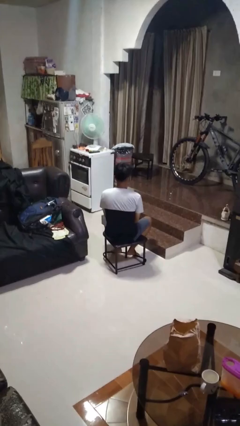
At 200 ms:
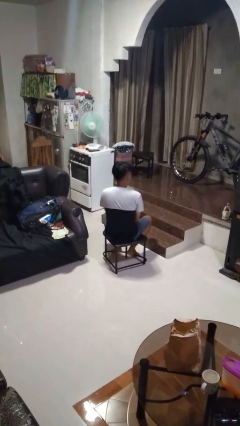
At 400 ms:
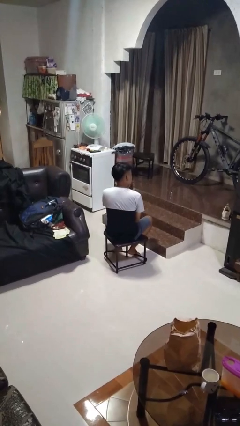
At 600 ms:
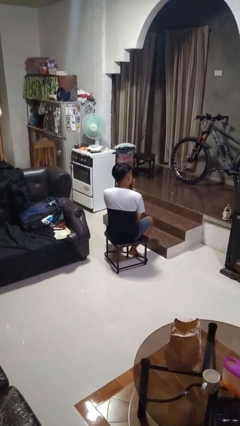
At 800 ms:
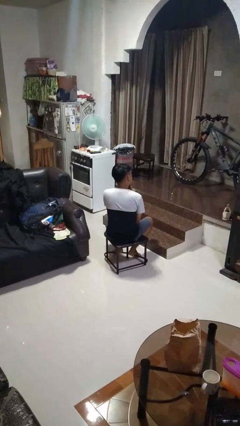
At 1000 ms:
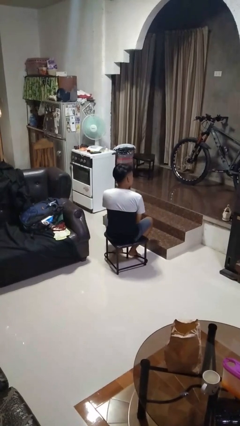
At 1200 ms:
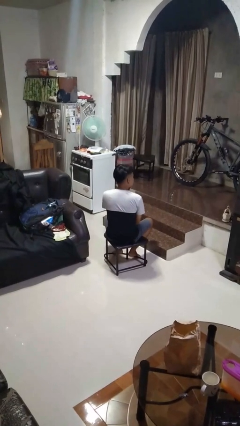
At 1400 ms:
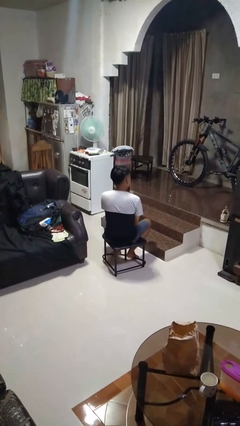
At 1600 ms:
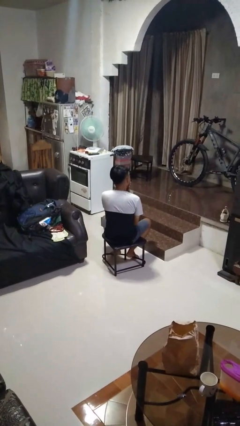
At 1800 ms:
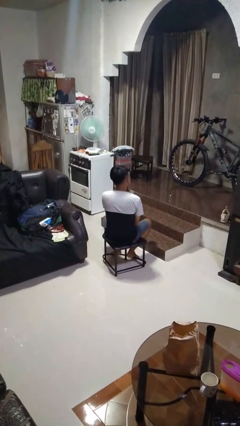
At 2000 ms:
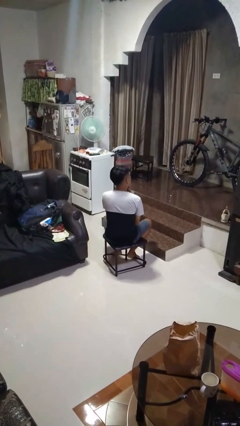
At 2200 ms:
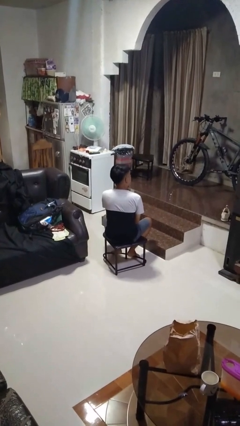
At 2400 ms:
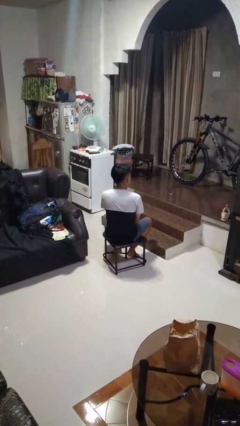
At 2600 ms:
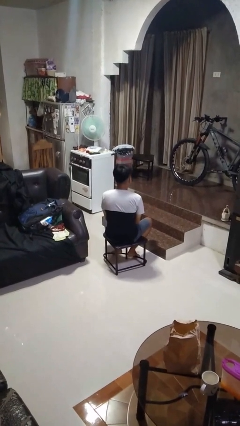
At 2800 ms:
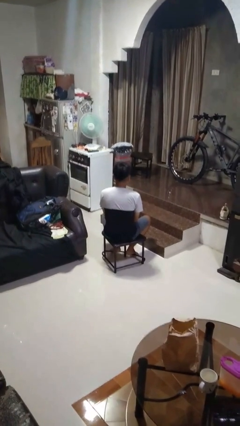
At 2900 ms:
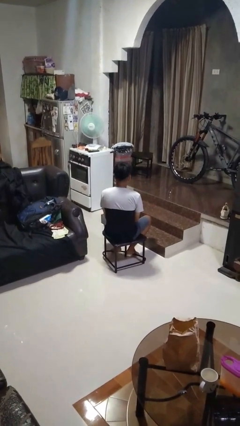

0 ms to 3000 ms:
person strokes chin

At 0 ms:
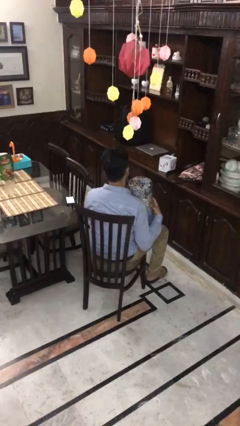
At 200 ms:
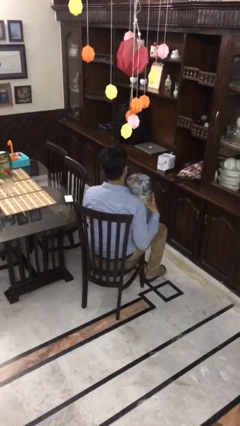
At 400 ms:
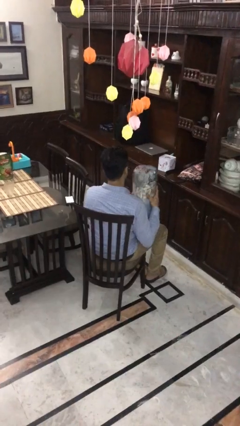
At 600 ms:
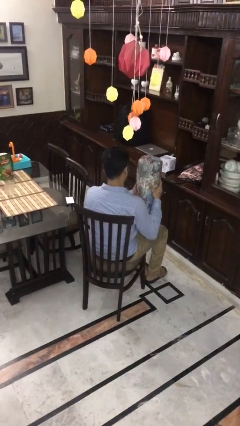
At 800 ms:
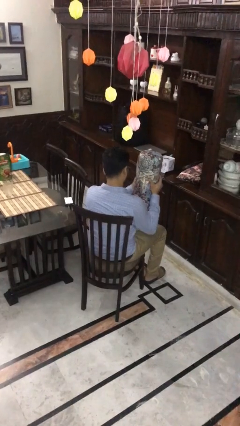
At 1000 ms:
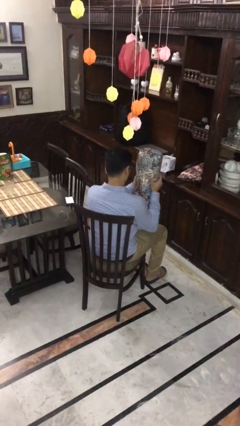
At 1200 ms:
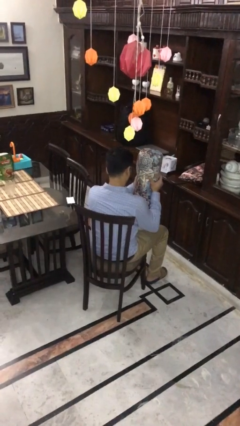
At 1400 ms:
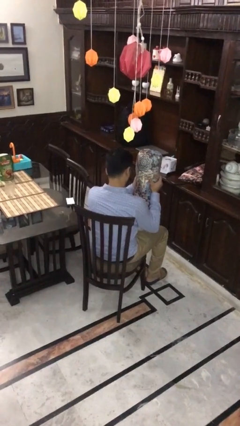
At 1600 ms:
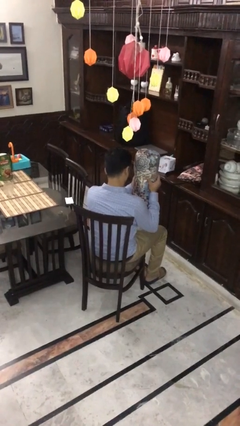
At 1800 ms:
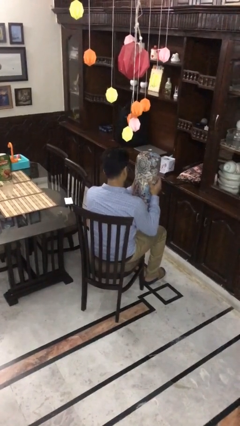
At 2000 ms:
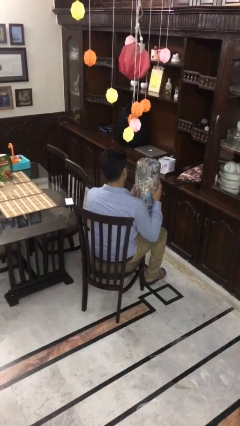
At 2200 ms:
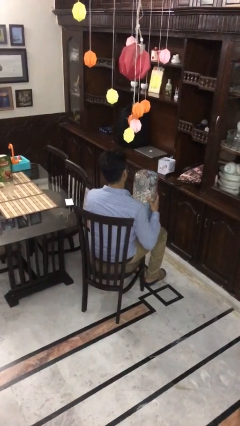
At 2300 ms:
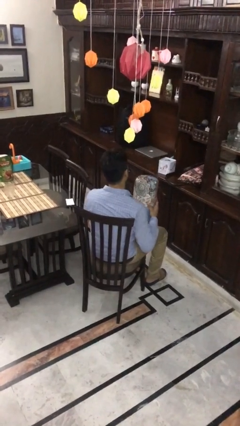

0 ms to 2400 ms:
person squeezes object

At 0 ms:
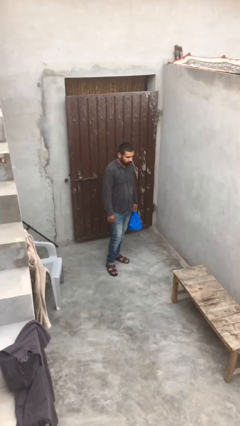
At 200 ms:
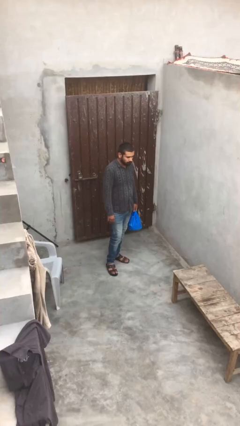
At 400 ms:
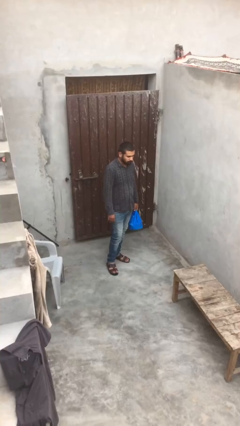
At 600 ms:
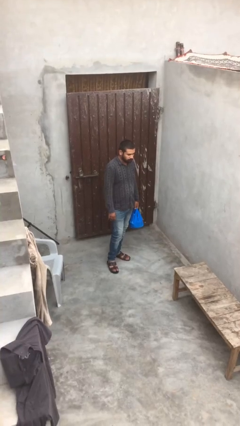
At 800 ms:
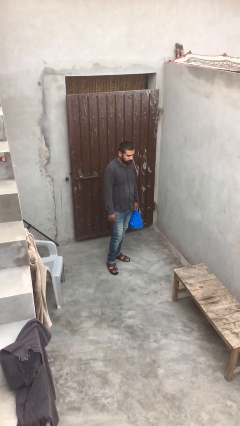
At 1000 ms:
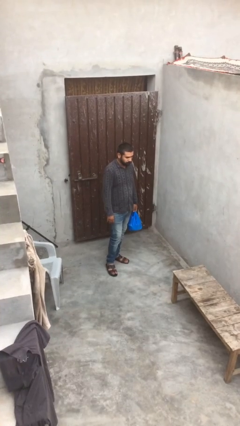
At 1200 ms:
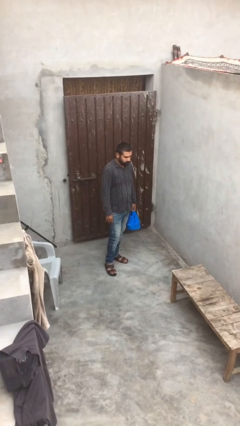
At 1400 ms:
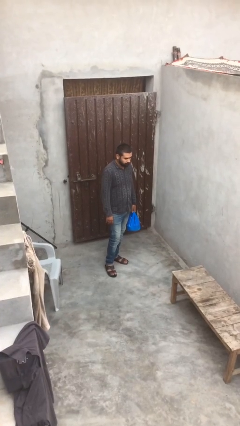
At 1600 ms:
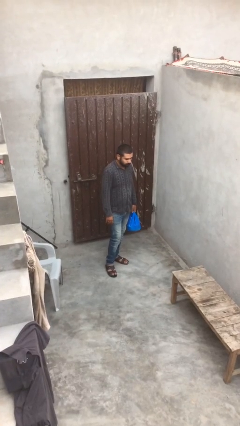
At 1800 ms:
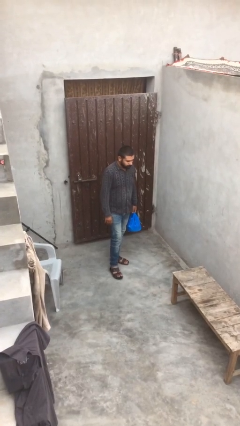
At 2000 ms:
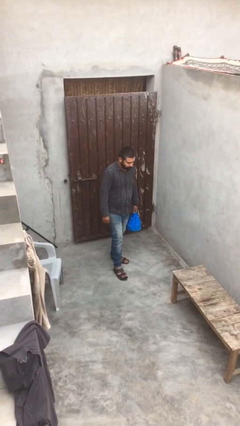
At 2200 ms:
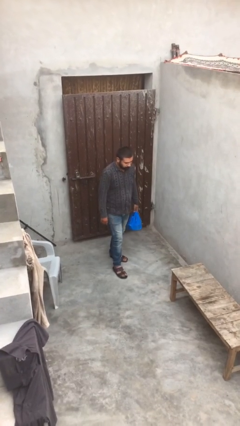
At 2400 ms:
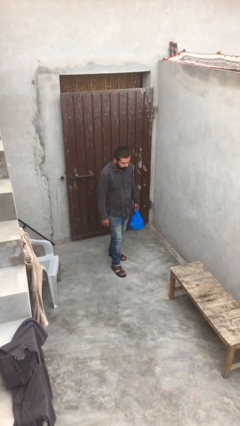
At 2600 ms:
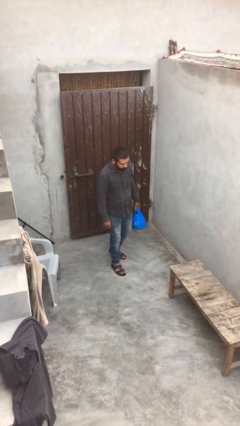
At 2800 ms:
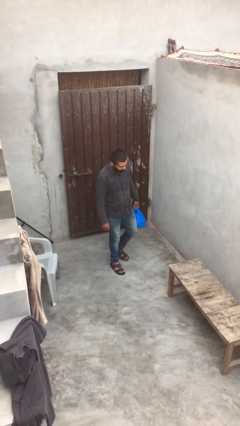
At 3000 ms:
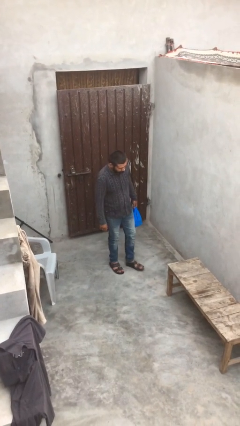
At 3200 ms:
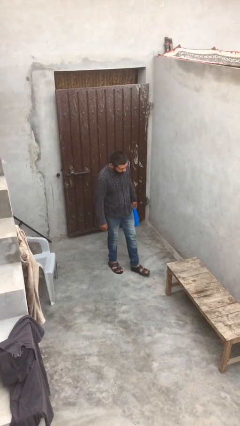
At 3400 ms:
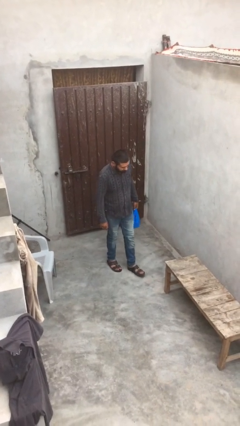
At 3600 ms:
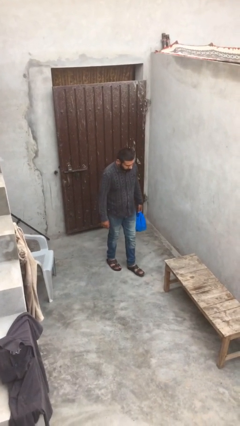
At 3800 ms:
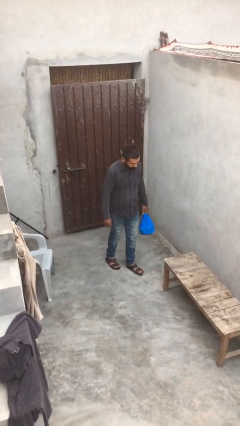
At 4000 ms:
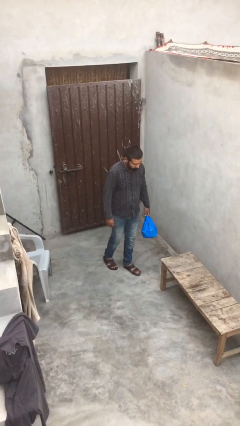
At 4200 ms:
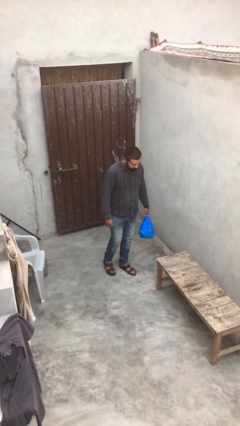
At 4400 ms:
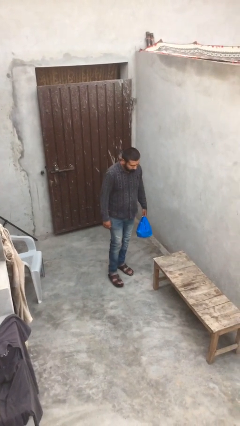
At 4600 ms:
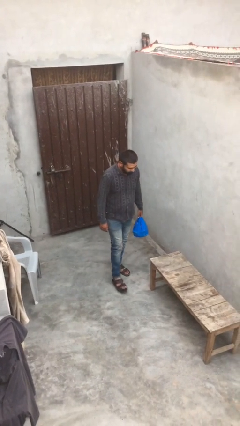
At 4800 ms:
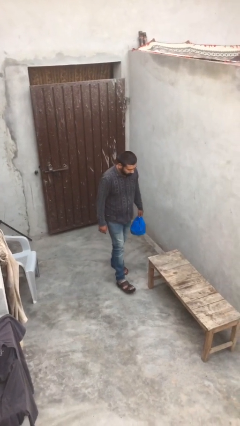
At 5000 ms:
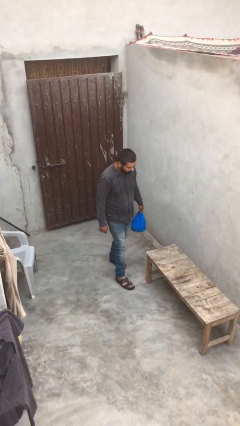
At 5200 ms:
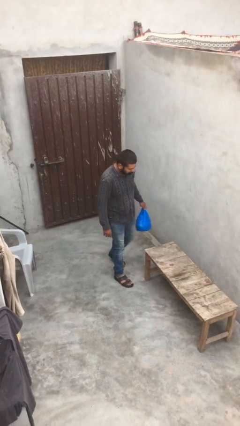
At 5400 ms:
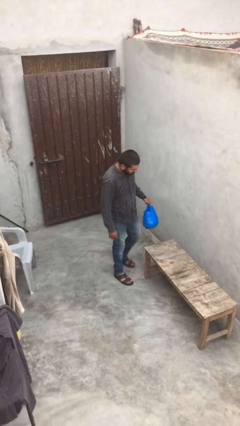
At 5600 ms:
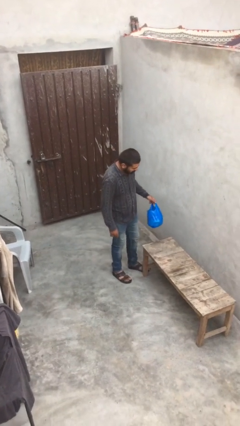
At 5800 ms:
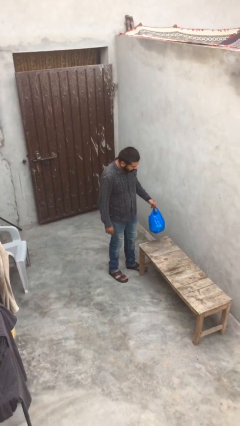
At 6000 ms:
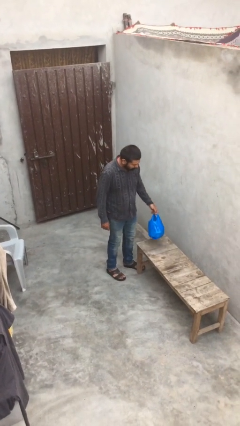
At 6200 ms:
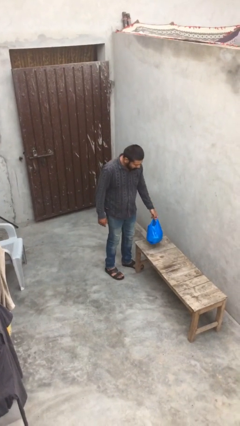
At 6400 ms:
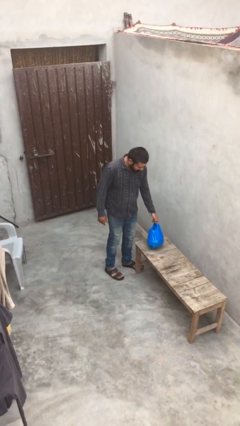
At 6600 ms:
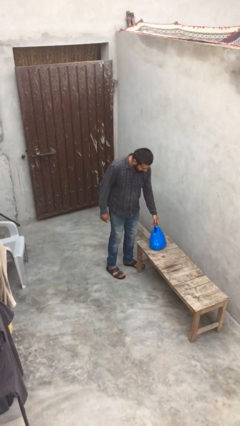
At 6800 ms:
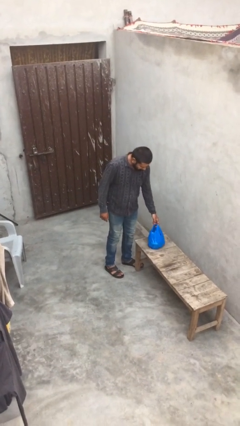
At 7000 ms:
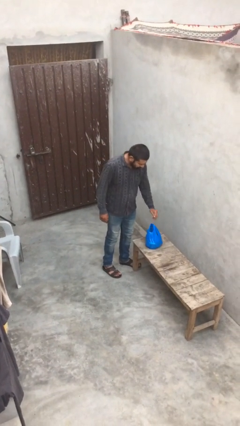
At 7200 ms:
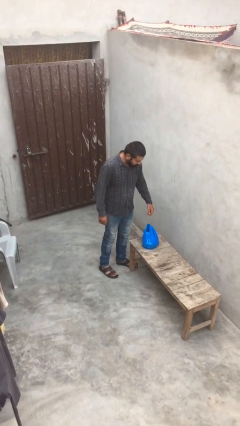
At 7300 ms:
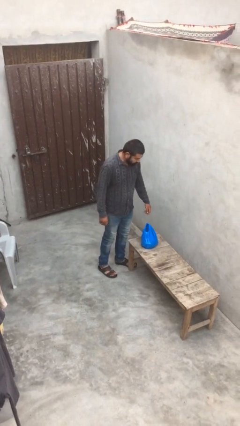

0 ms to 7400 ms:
person puts down object on table

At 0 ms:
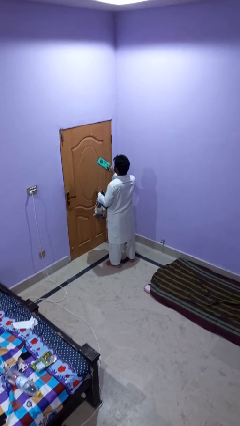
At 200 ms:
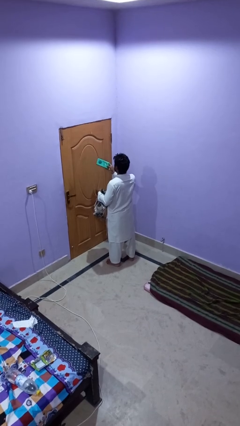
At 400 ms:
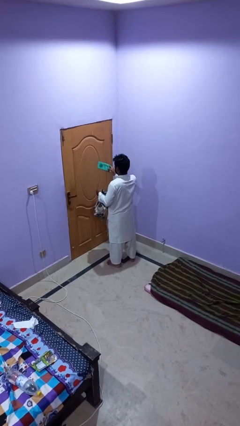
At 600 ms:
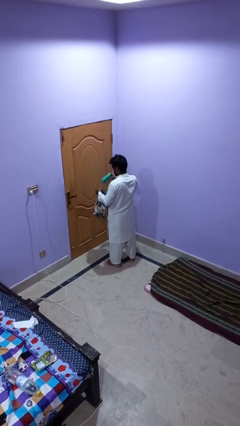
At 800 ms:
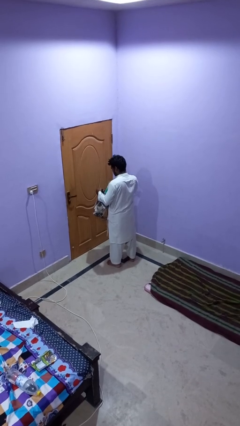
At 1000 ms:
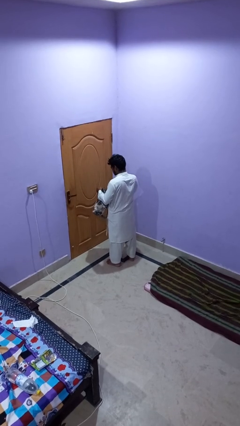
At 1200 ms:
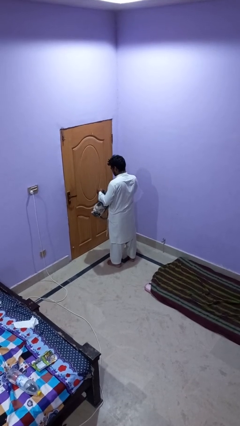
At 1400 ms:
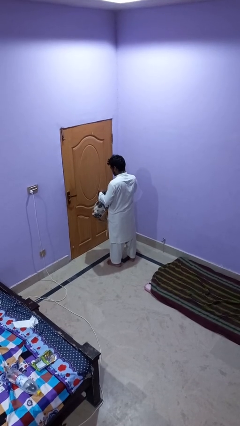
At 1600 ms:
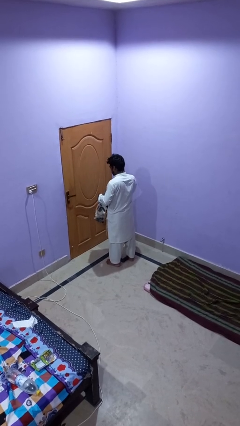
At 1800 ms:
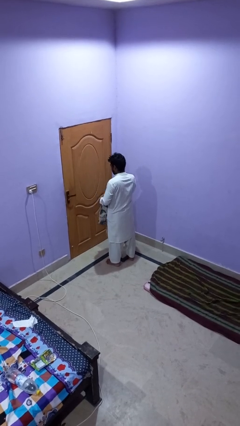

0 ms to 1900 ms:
person puts object into backpack

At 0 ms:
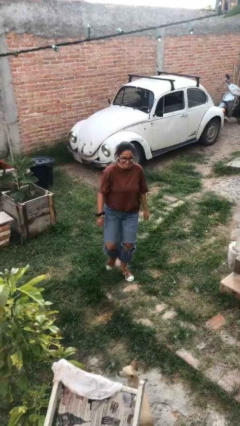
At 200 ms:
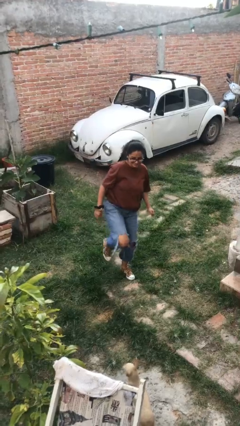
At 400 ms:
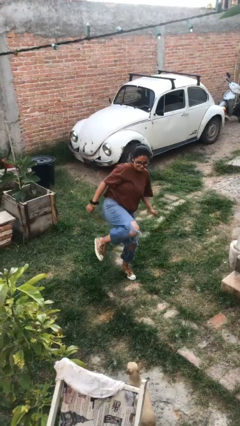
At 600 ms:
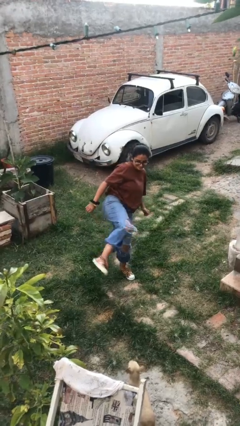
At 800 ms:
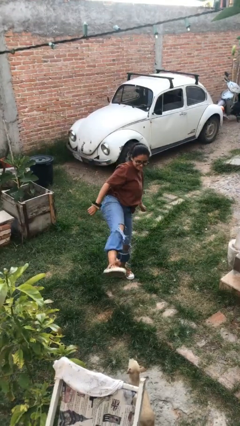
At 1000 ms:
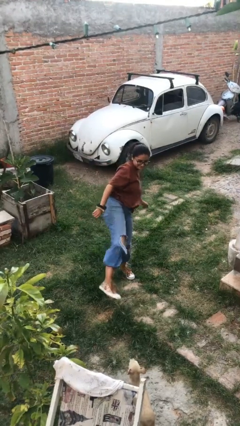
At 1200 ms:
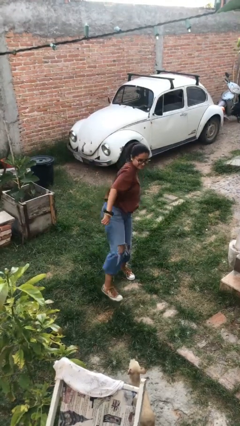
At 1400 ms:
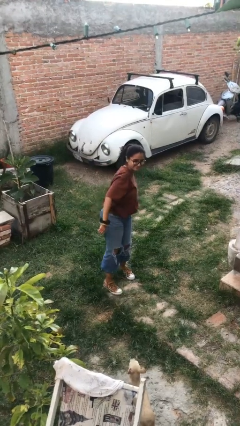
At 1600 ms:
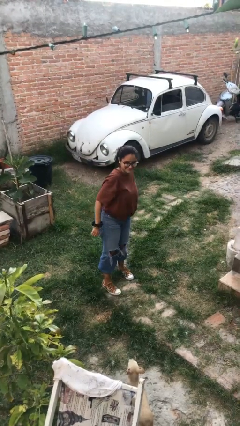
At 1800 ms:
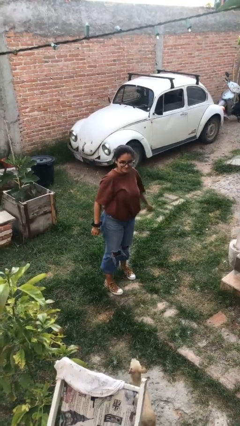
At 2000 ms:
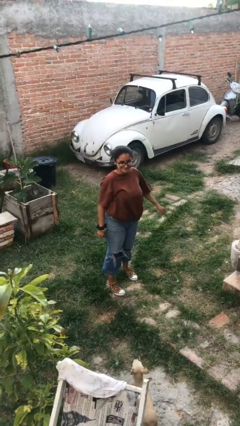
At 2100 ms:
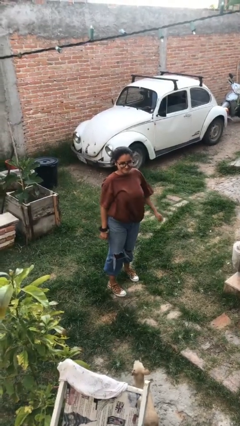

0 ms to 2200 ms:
person karate kicks

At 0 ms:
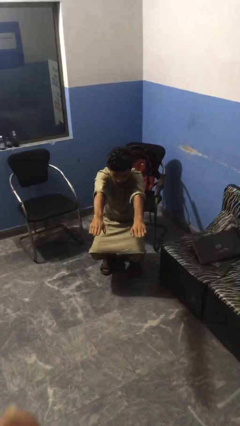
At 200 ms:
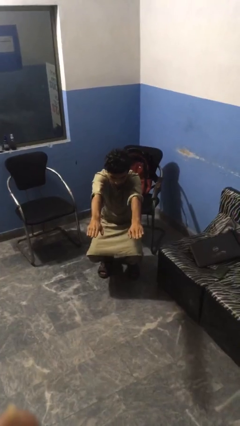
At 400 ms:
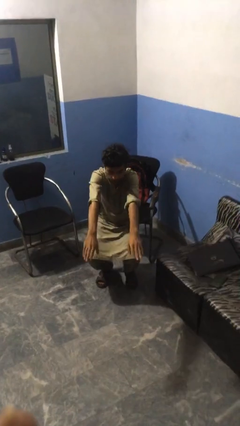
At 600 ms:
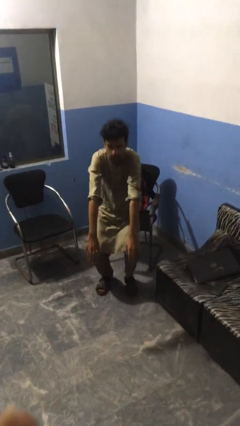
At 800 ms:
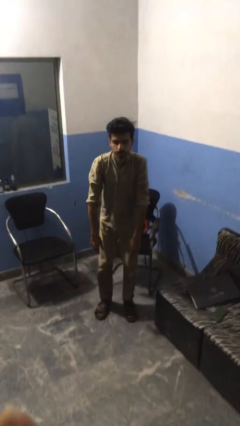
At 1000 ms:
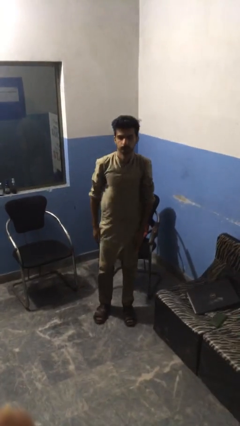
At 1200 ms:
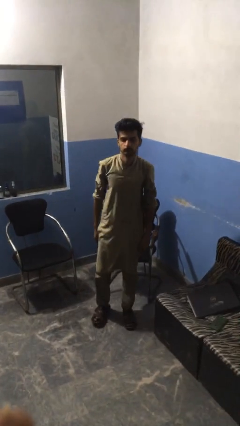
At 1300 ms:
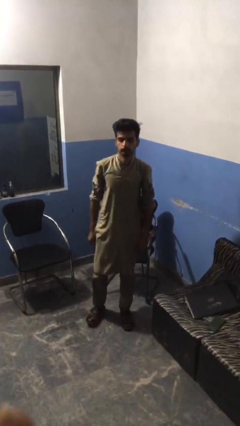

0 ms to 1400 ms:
person stands up
